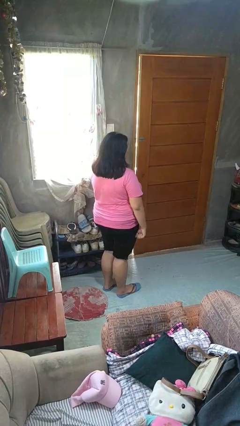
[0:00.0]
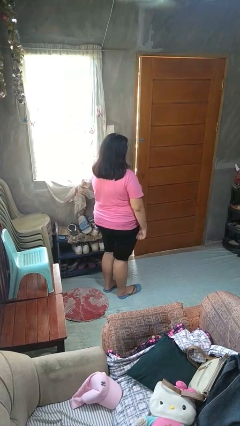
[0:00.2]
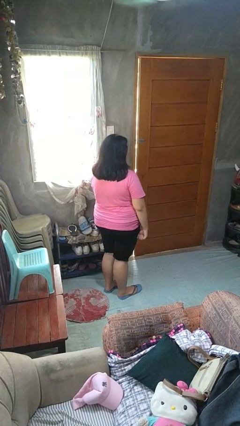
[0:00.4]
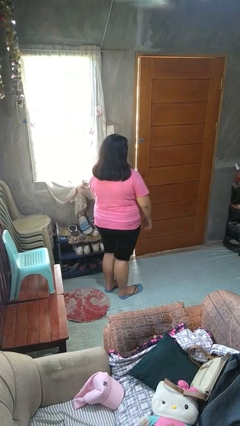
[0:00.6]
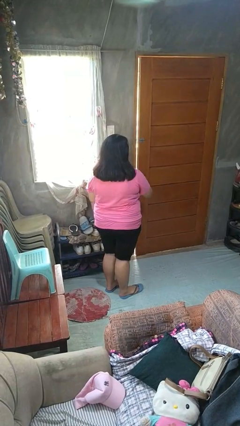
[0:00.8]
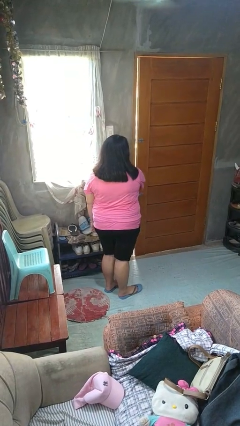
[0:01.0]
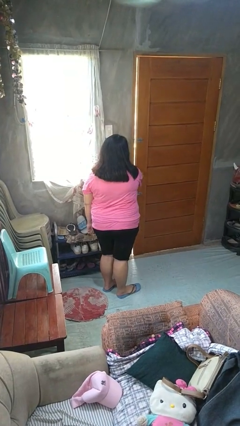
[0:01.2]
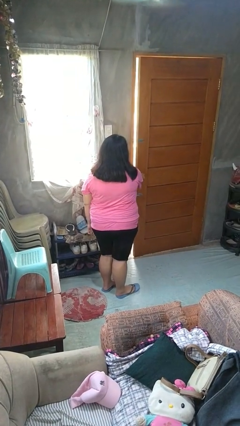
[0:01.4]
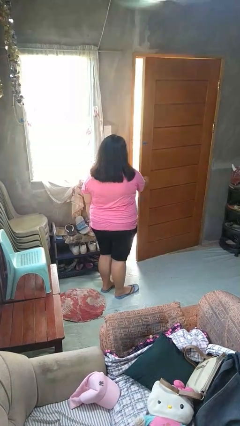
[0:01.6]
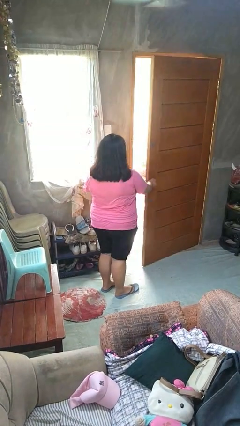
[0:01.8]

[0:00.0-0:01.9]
person opens facility door

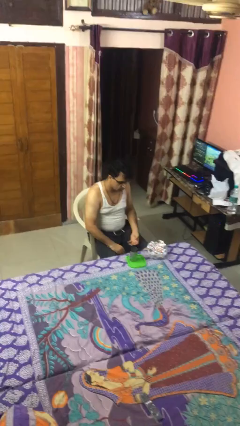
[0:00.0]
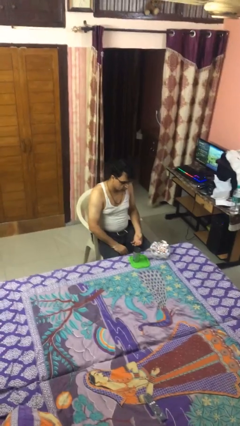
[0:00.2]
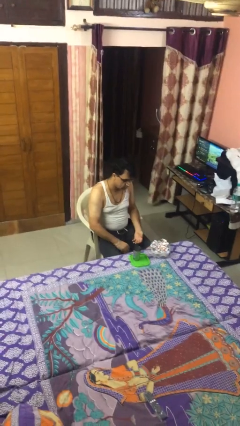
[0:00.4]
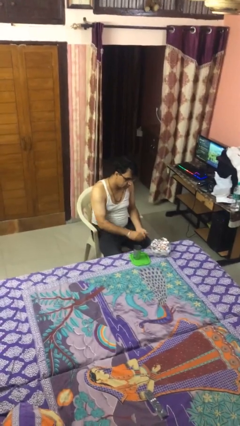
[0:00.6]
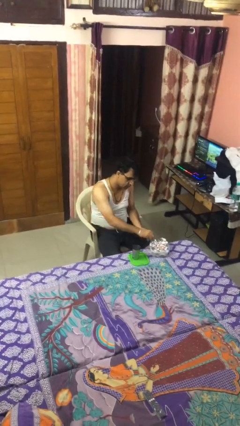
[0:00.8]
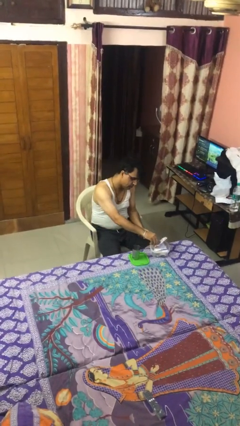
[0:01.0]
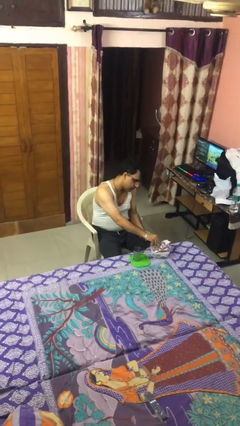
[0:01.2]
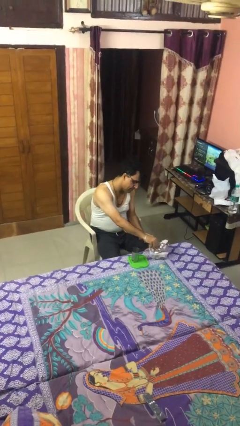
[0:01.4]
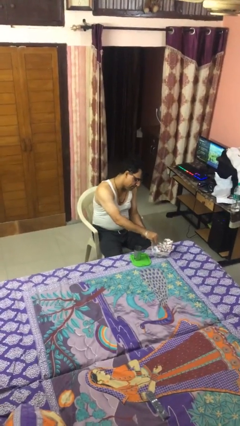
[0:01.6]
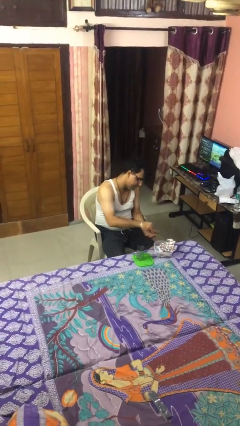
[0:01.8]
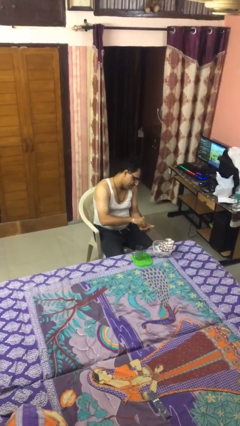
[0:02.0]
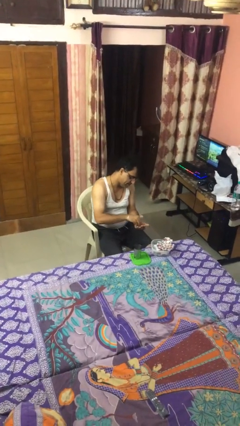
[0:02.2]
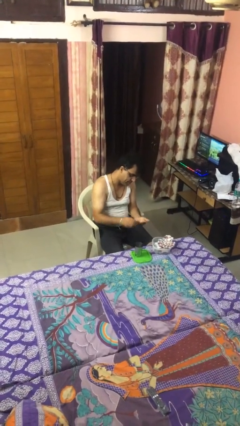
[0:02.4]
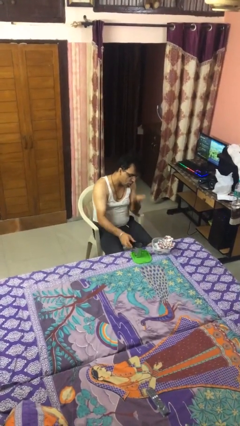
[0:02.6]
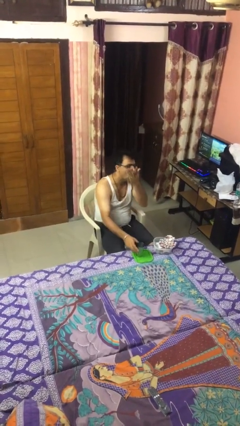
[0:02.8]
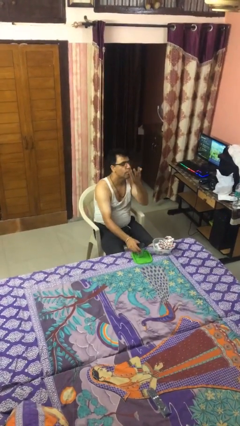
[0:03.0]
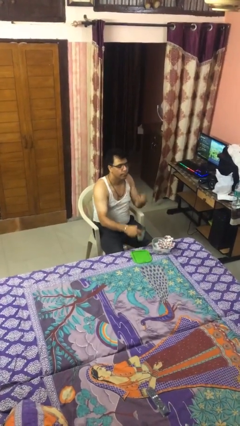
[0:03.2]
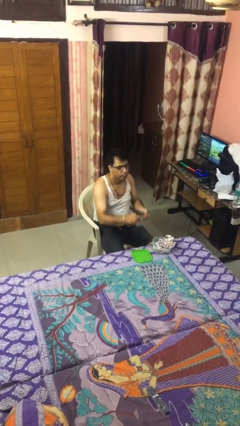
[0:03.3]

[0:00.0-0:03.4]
person takes medicine pills

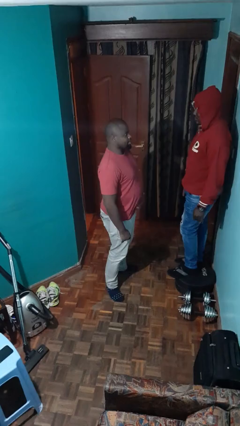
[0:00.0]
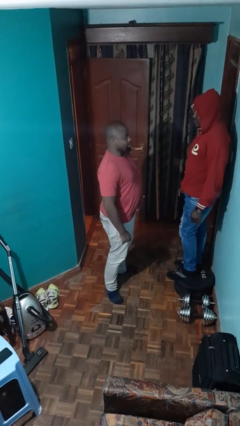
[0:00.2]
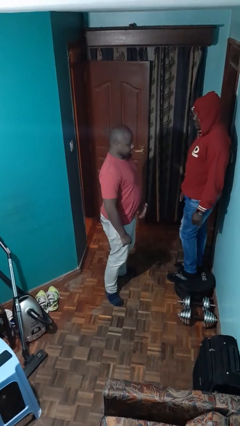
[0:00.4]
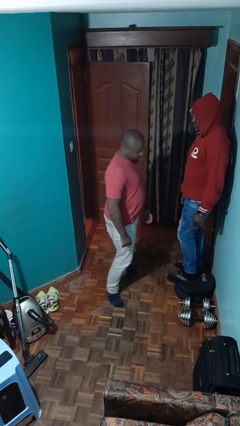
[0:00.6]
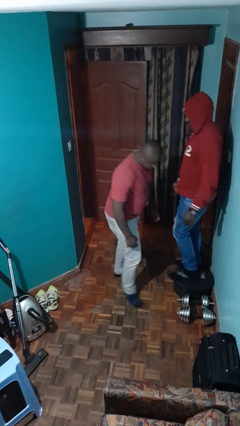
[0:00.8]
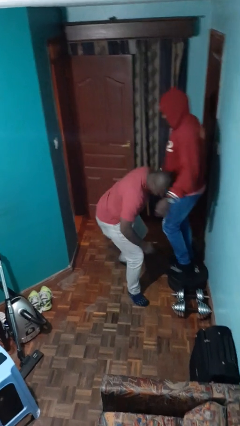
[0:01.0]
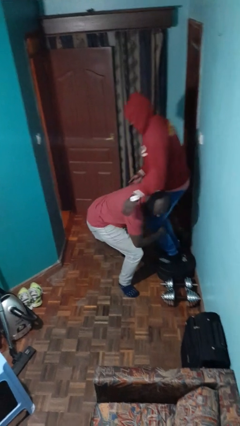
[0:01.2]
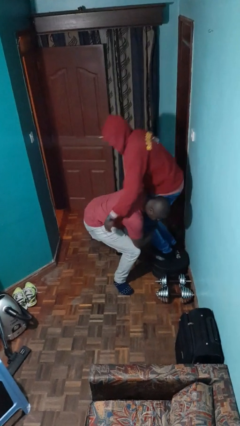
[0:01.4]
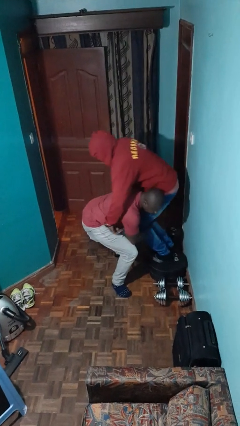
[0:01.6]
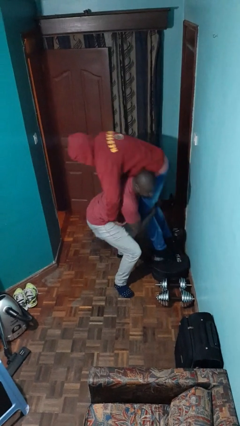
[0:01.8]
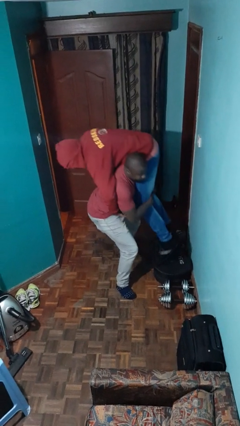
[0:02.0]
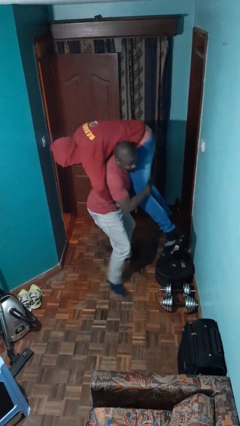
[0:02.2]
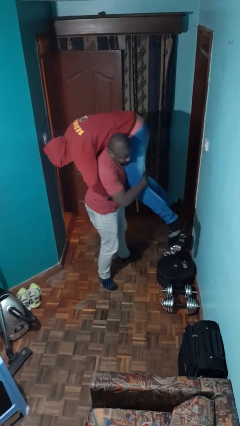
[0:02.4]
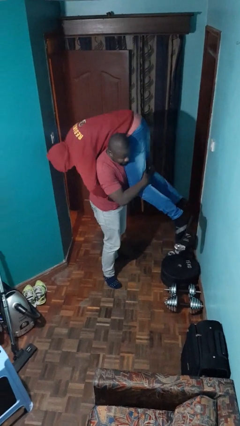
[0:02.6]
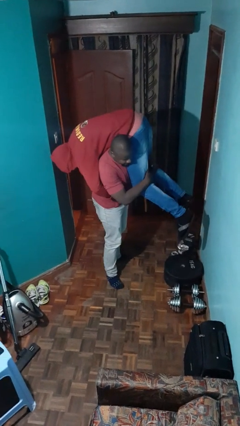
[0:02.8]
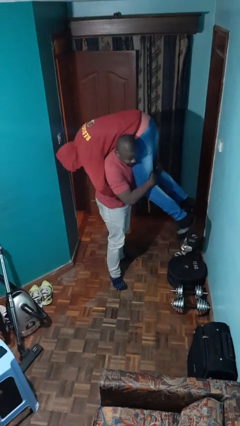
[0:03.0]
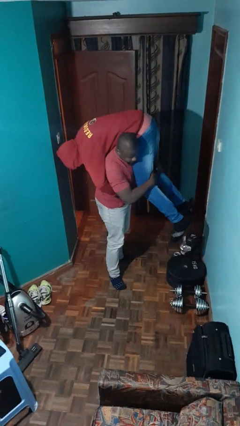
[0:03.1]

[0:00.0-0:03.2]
person carries person over shoulder

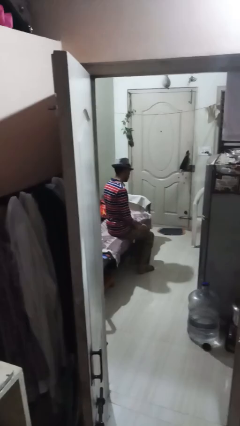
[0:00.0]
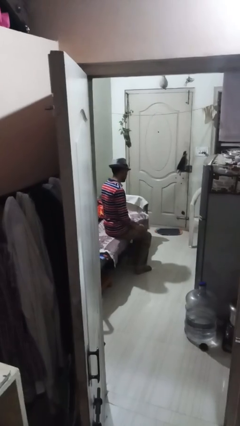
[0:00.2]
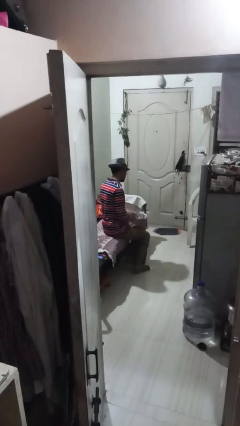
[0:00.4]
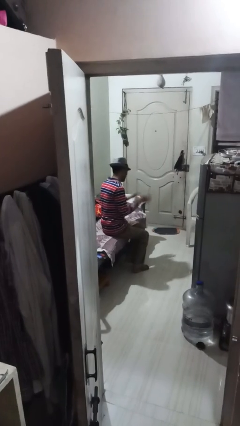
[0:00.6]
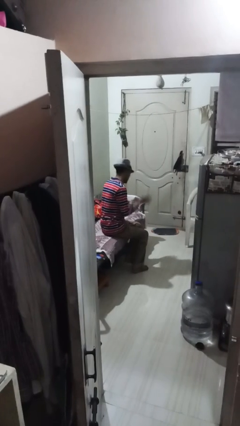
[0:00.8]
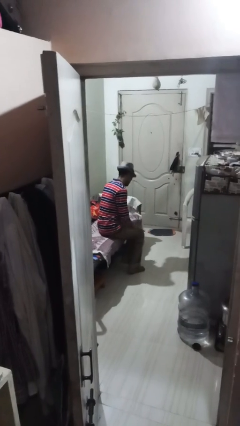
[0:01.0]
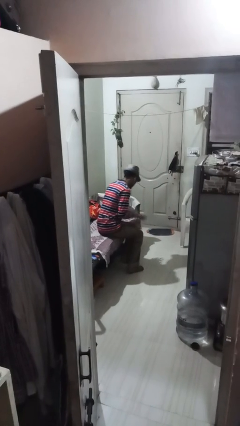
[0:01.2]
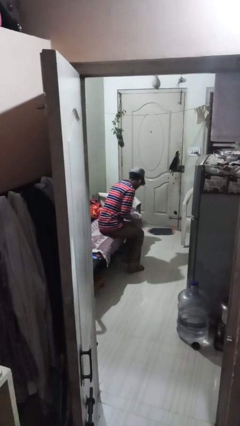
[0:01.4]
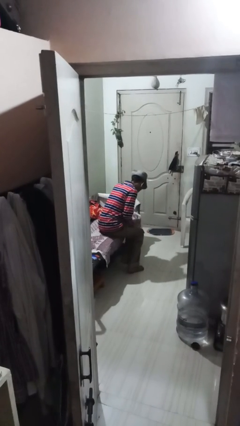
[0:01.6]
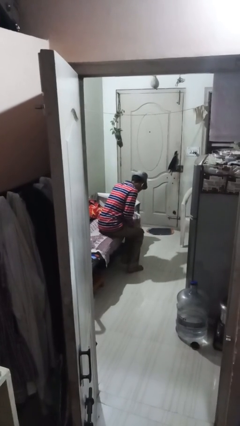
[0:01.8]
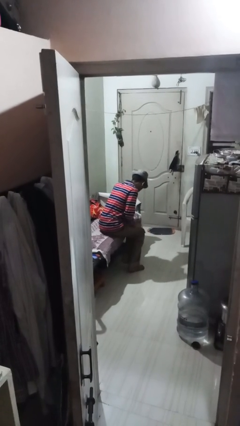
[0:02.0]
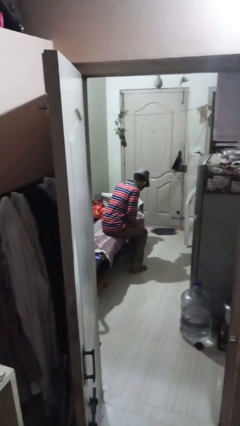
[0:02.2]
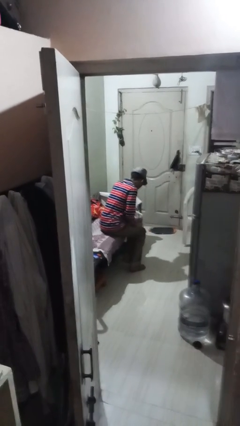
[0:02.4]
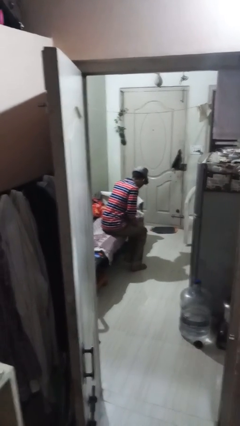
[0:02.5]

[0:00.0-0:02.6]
person slaps hands on thighs

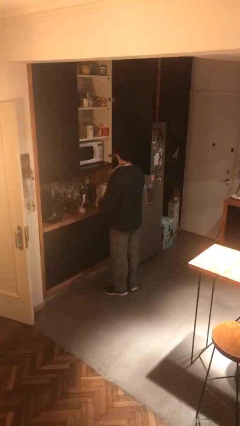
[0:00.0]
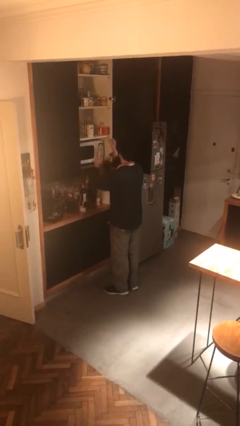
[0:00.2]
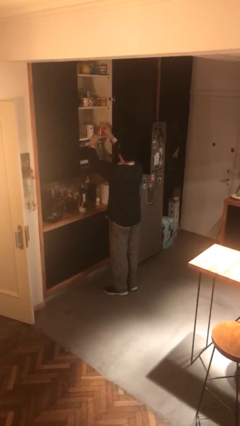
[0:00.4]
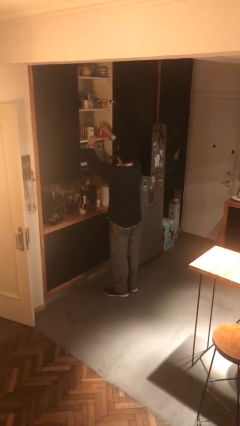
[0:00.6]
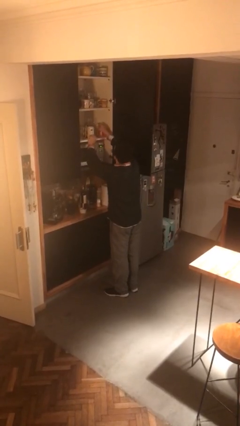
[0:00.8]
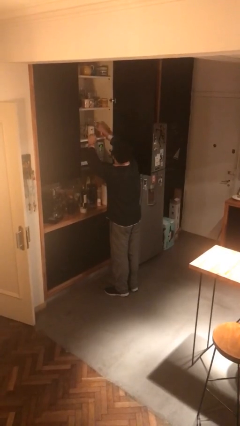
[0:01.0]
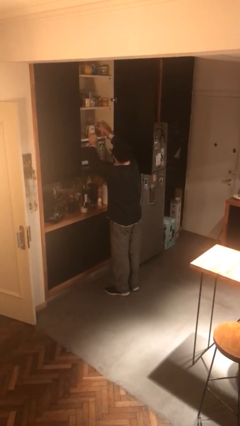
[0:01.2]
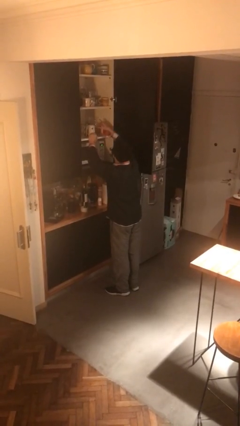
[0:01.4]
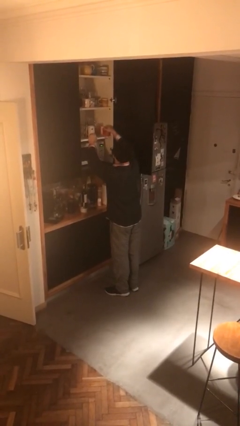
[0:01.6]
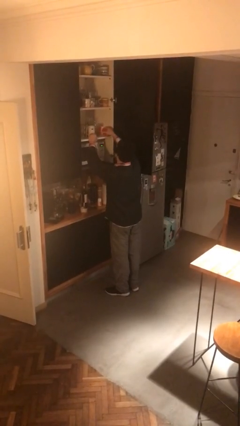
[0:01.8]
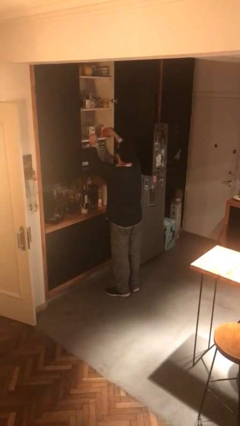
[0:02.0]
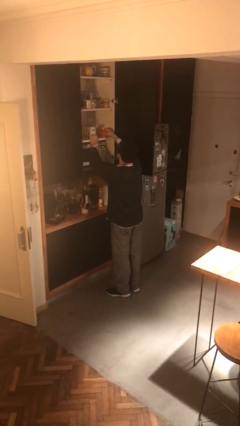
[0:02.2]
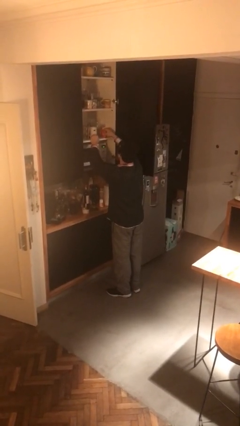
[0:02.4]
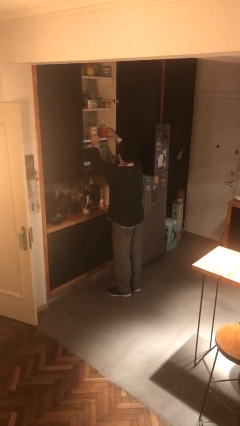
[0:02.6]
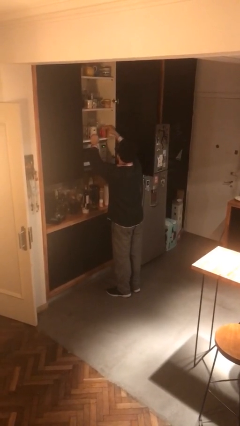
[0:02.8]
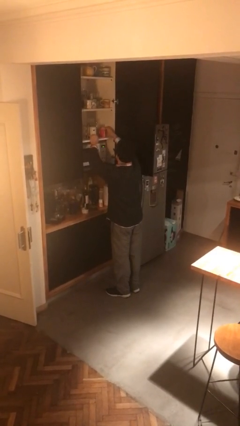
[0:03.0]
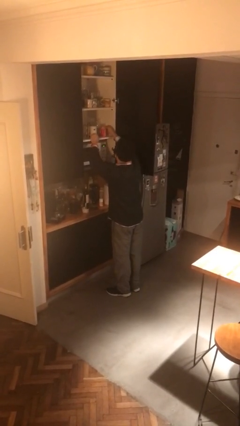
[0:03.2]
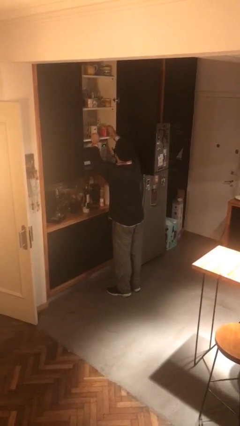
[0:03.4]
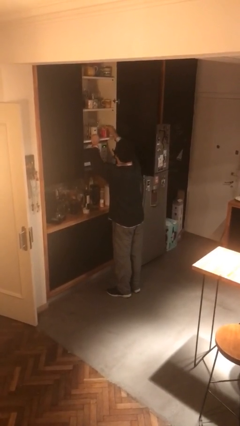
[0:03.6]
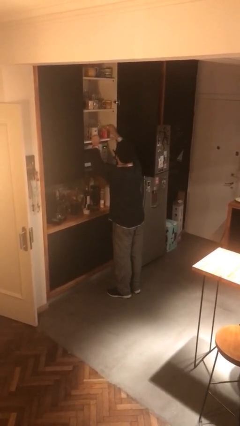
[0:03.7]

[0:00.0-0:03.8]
person searches in cabinet

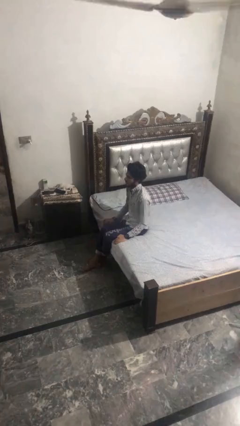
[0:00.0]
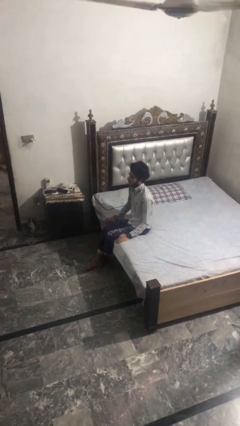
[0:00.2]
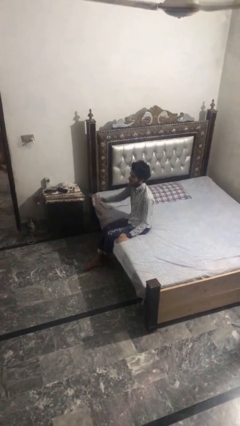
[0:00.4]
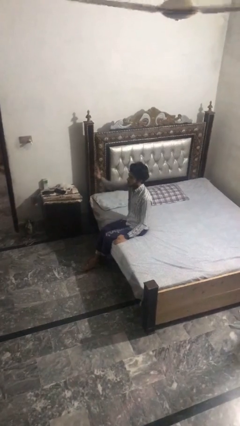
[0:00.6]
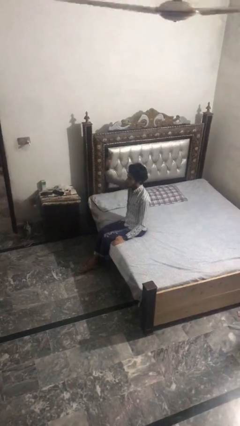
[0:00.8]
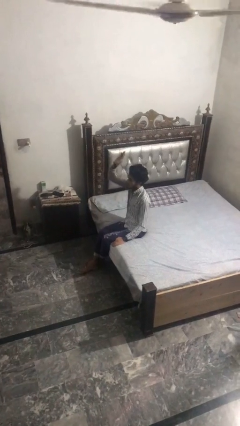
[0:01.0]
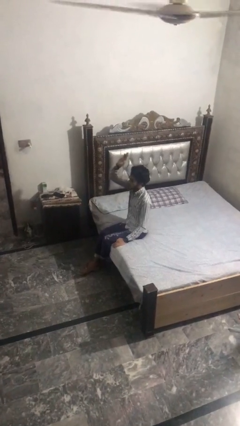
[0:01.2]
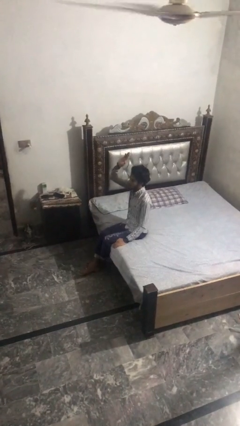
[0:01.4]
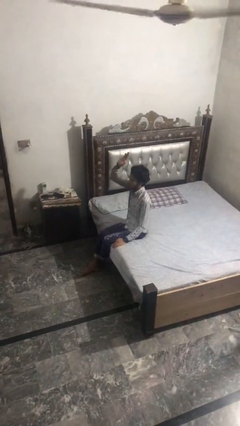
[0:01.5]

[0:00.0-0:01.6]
person gestures raise hand

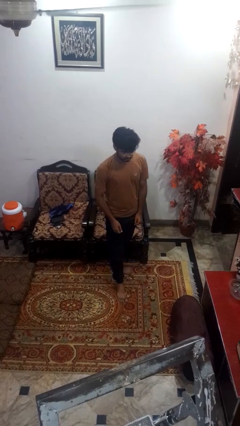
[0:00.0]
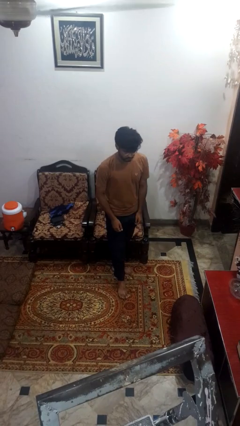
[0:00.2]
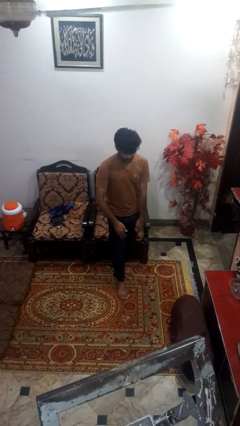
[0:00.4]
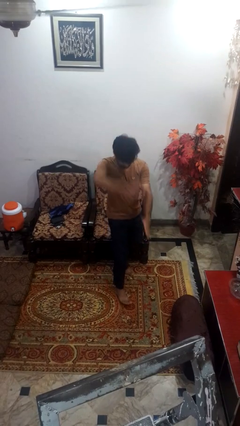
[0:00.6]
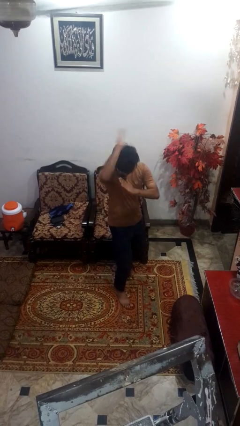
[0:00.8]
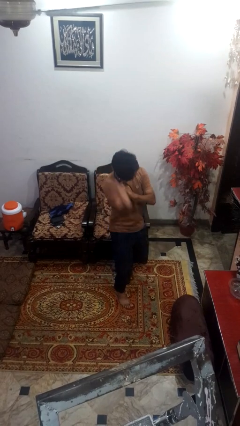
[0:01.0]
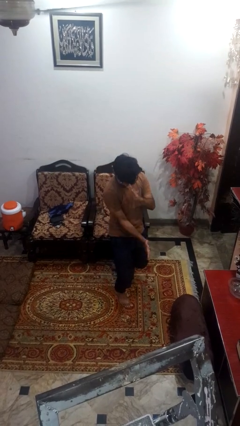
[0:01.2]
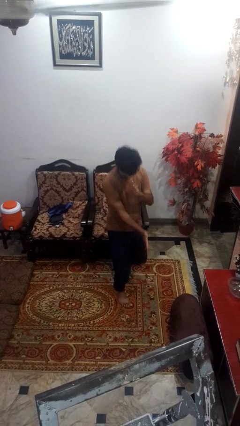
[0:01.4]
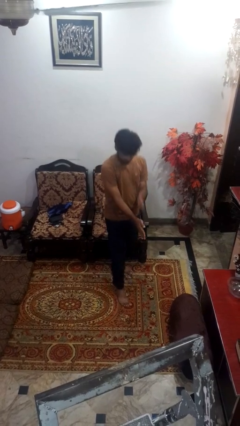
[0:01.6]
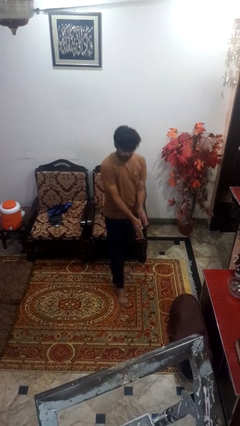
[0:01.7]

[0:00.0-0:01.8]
person karate chop
